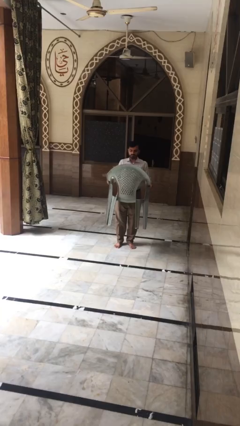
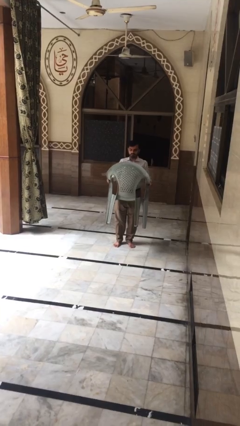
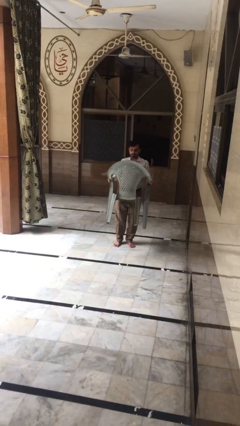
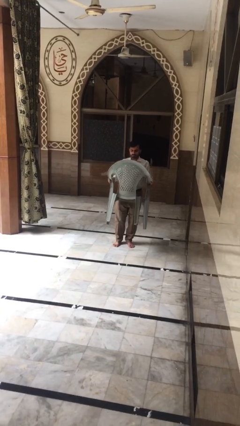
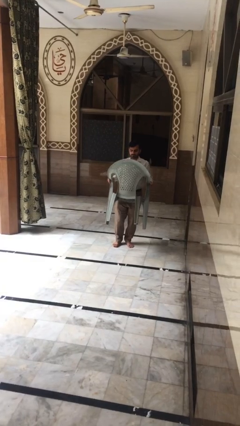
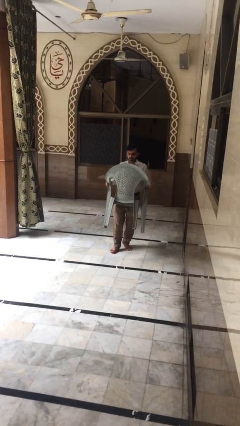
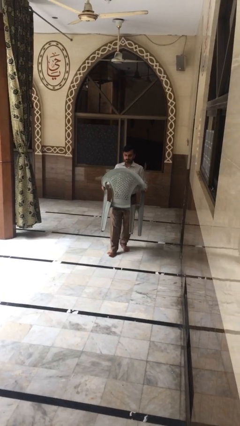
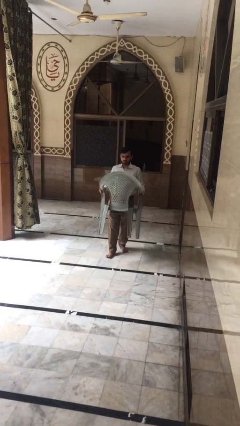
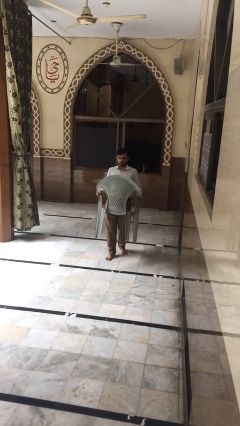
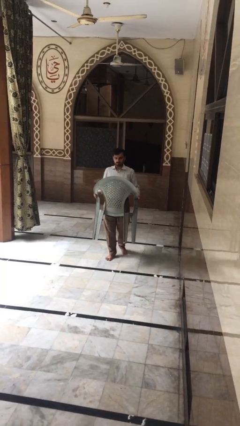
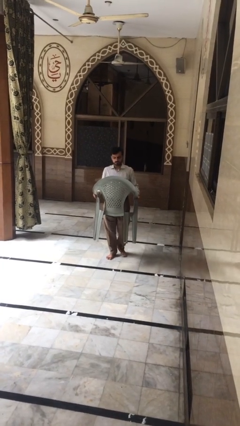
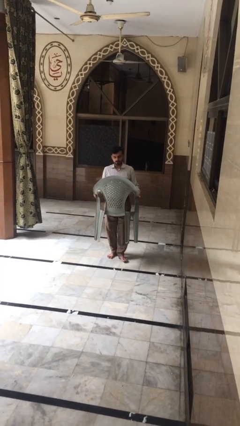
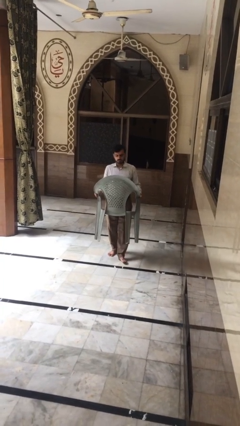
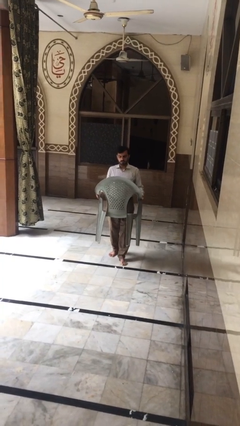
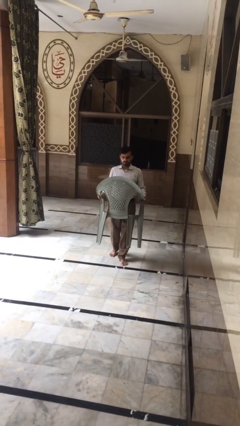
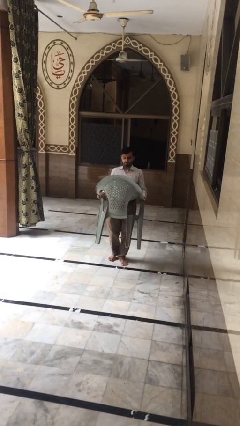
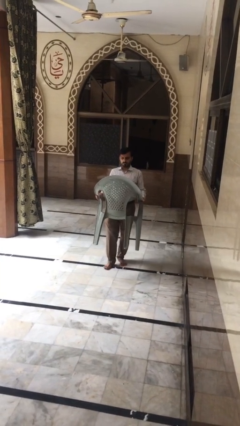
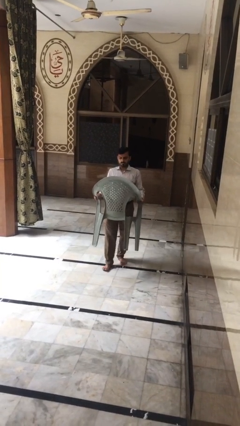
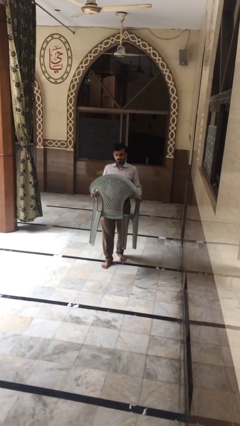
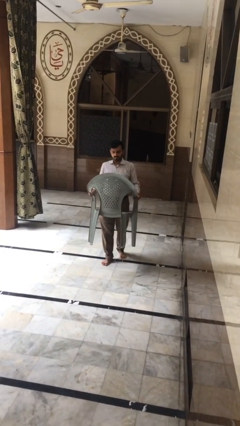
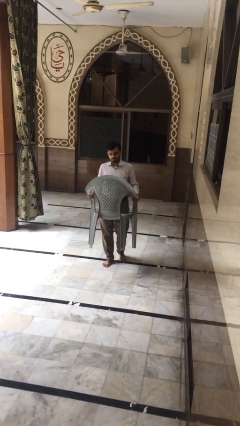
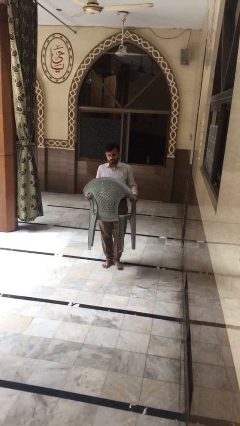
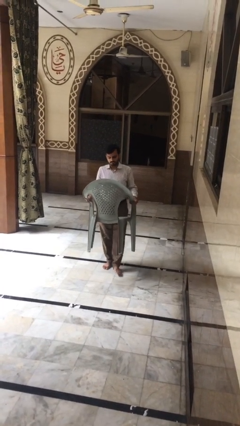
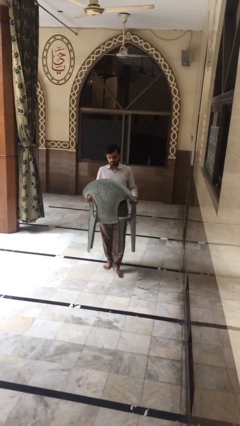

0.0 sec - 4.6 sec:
person carries heavy object

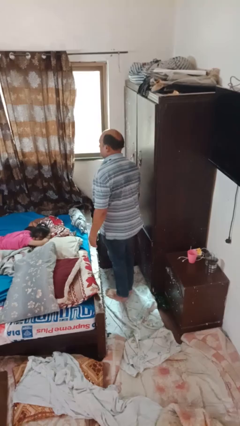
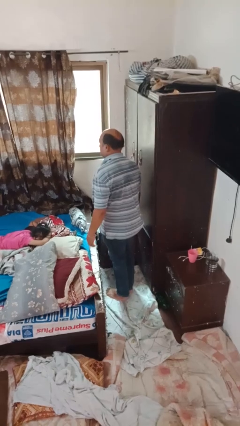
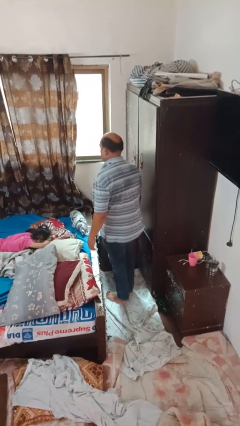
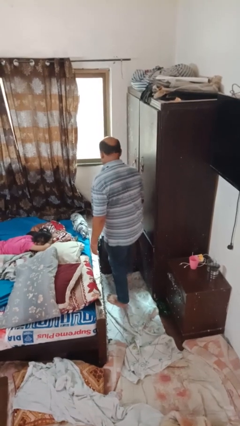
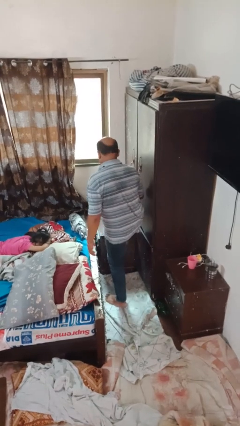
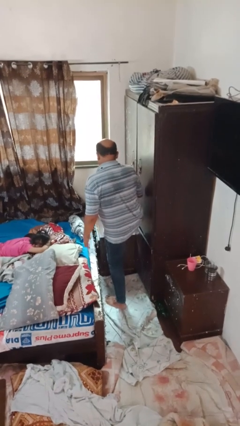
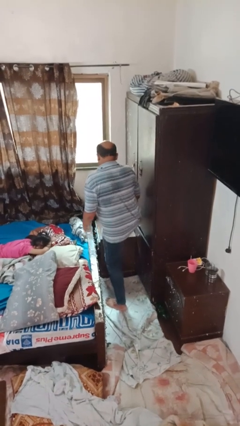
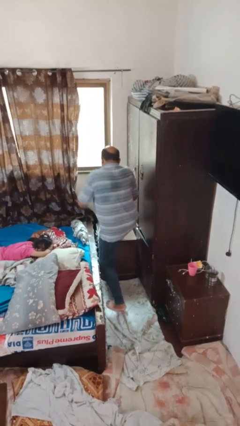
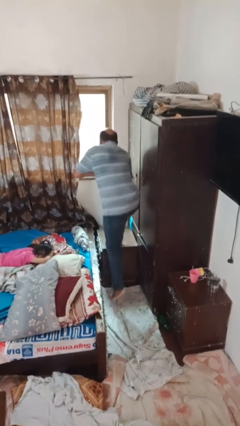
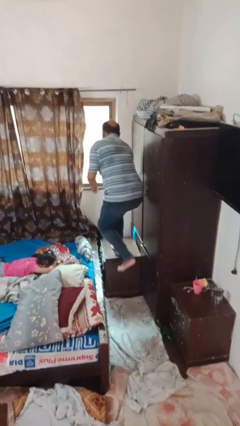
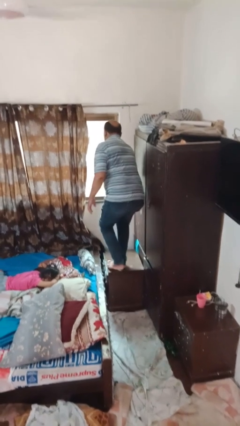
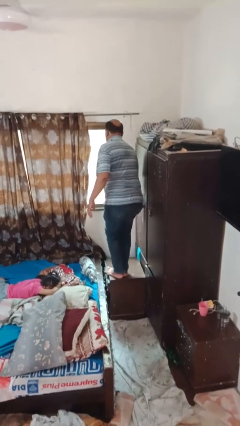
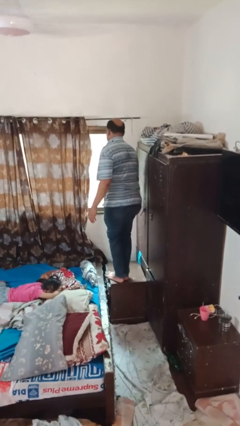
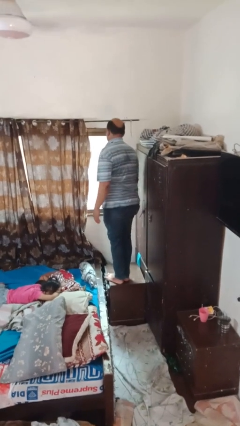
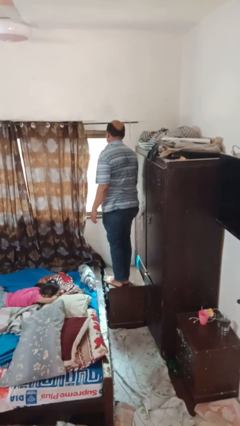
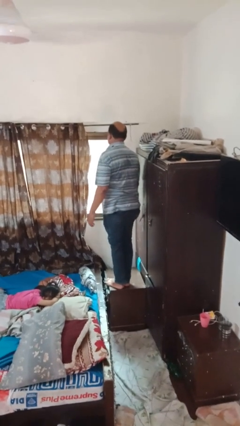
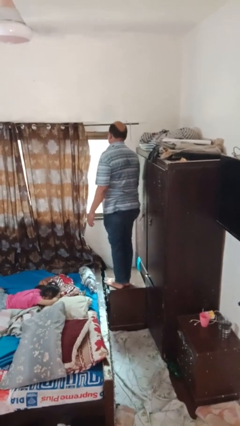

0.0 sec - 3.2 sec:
person climbs on table

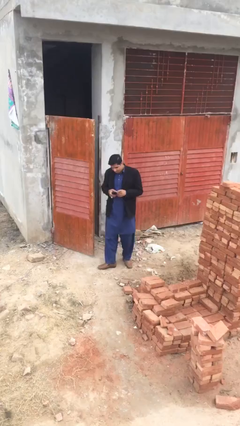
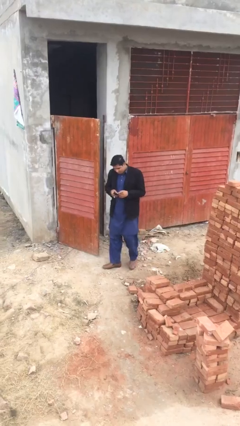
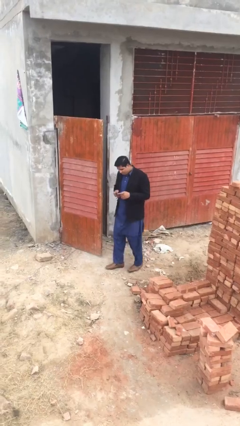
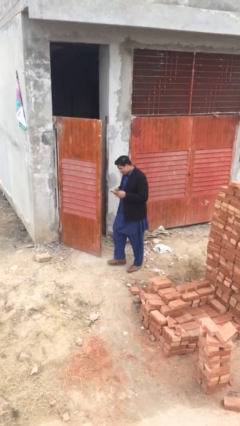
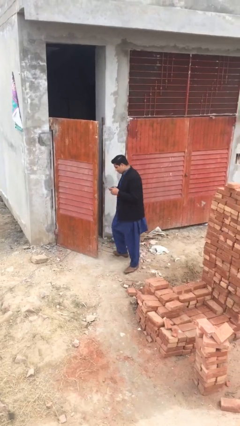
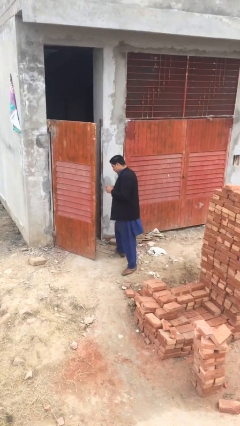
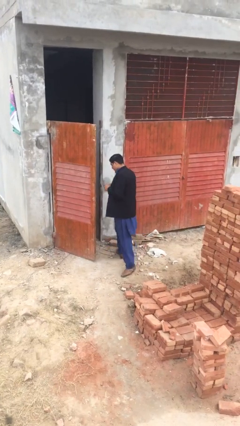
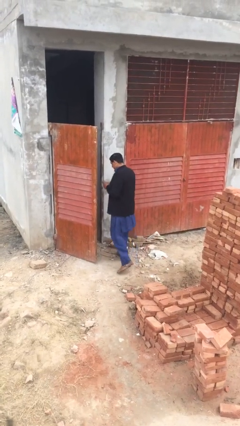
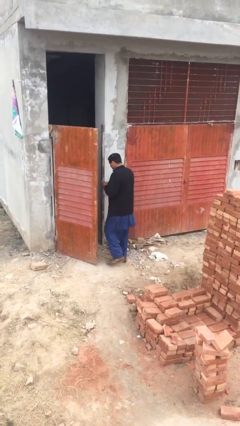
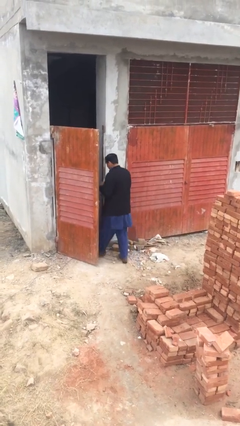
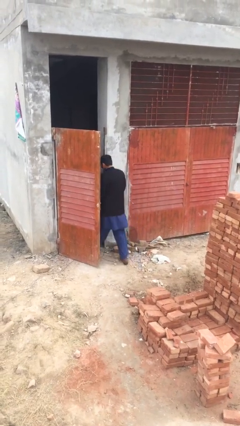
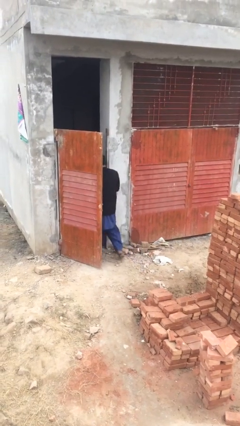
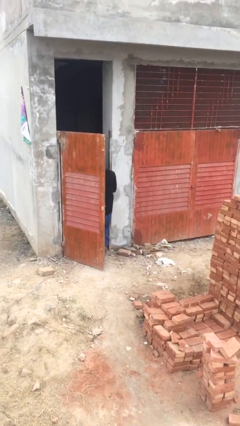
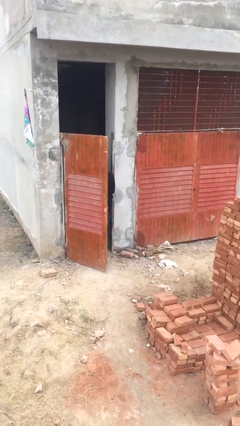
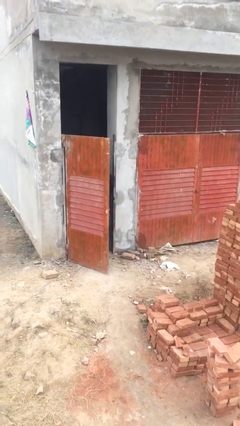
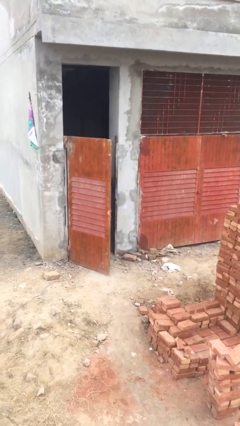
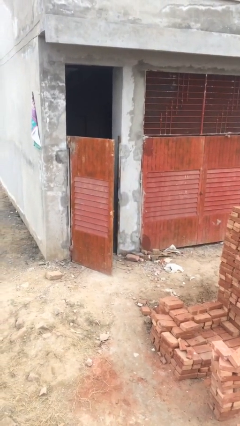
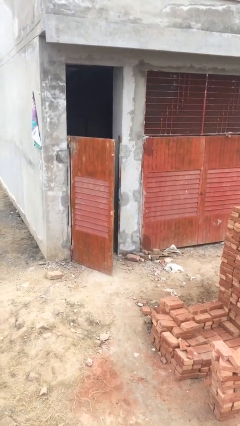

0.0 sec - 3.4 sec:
person exits scene through structure

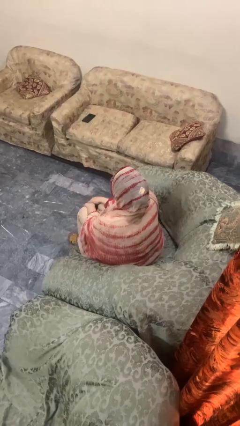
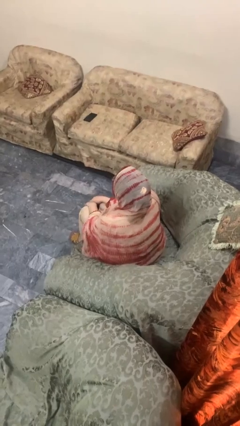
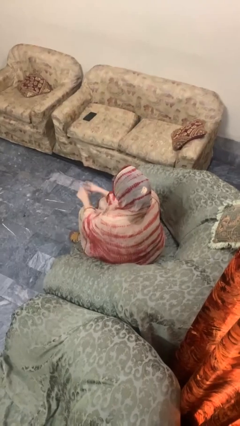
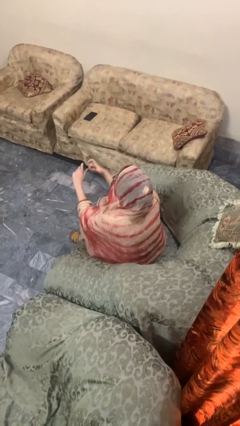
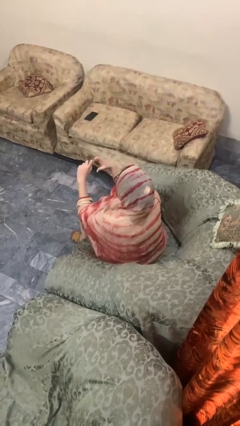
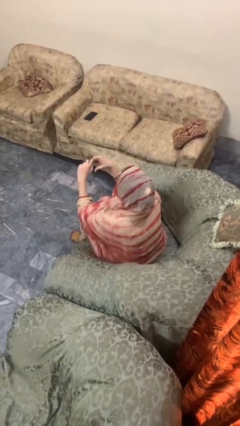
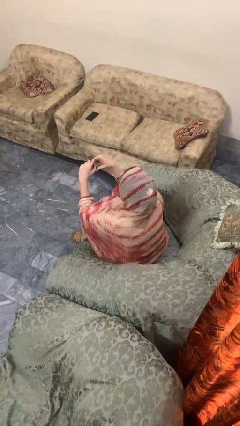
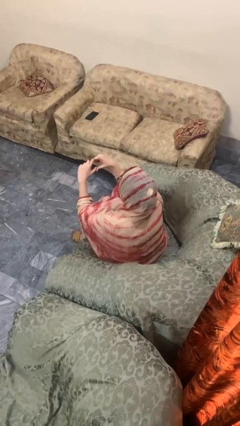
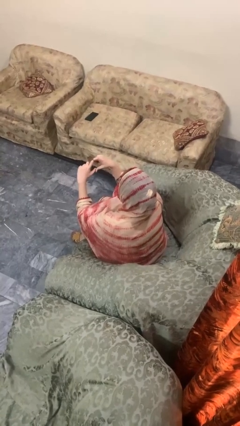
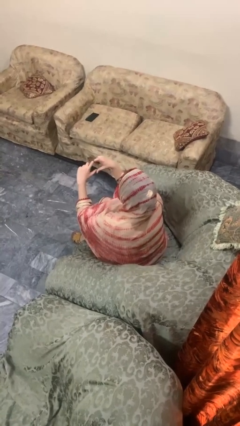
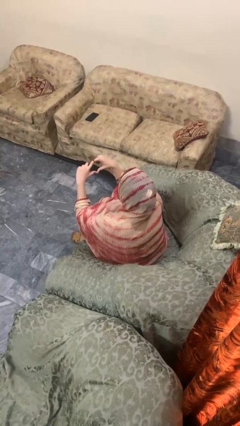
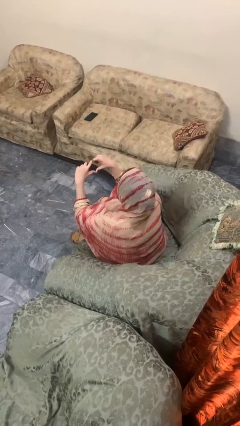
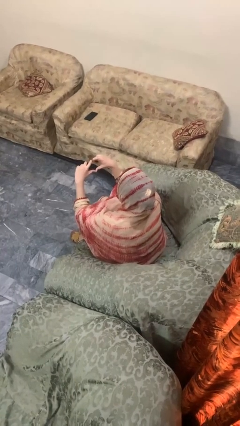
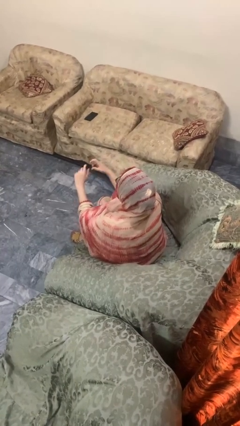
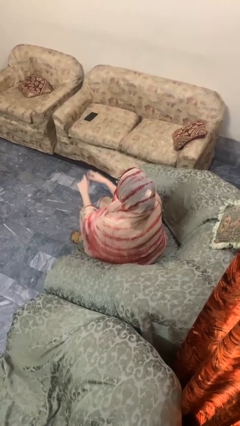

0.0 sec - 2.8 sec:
person gestures heart

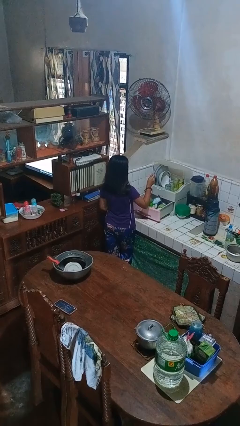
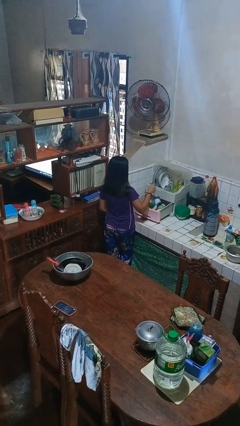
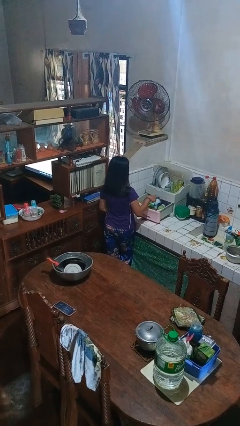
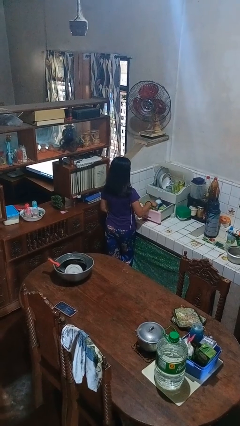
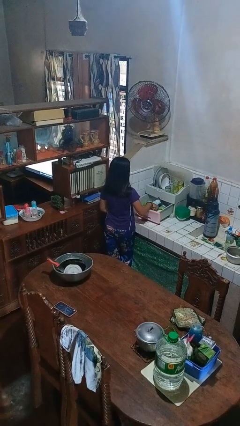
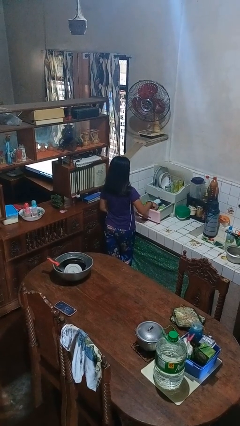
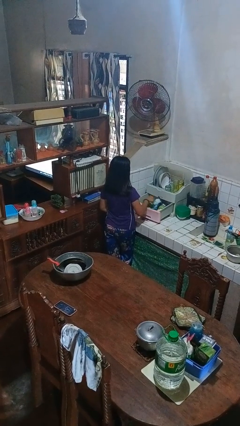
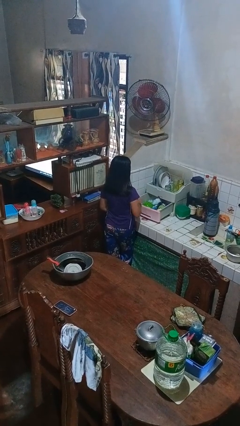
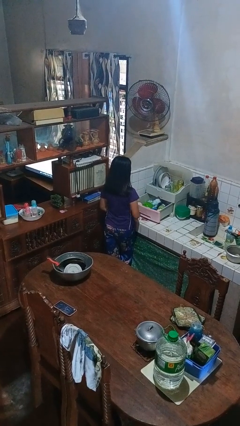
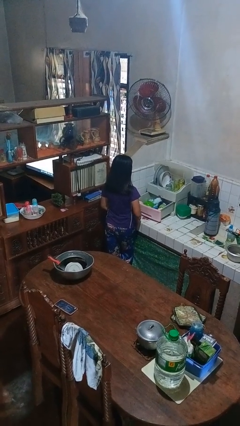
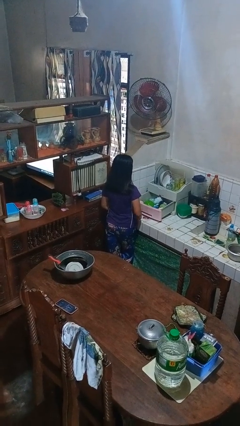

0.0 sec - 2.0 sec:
person puts object into kitchen drawer

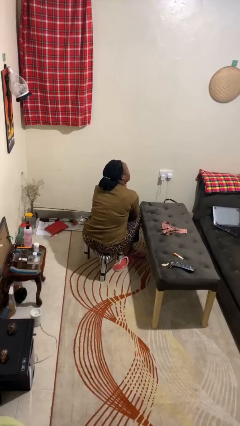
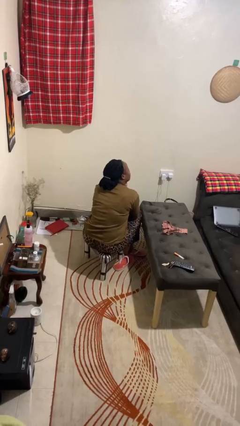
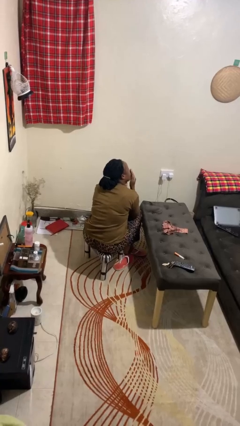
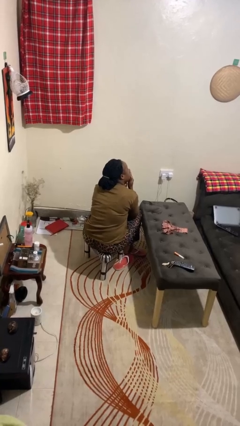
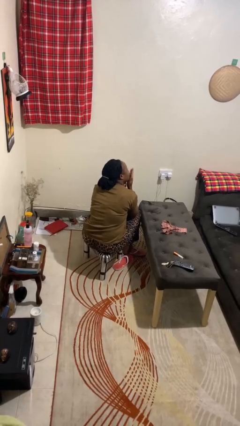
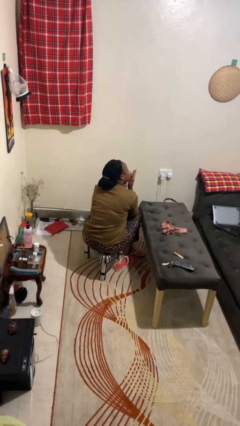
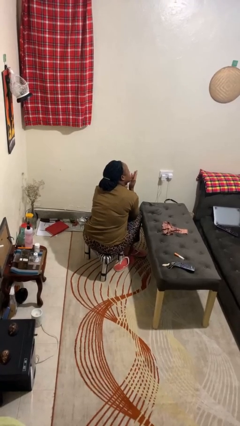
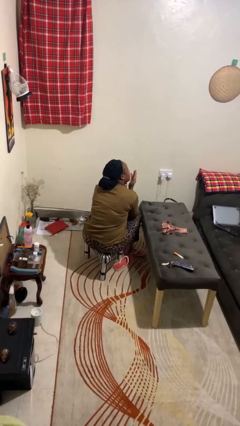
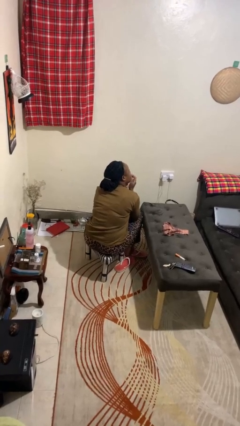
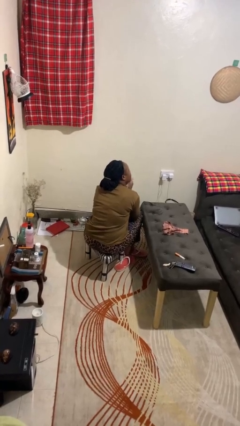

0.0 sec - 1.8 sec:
person gestures blow kiss
